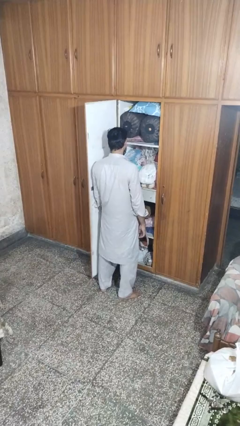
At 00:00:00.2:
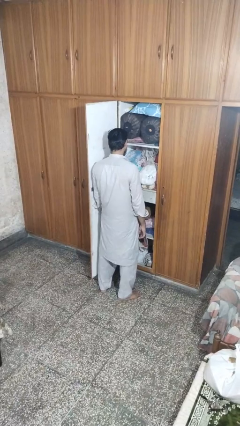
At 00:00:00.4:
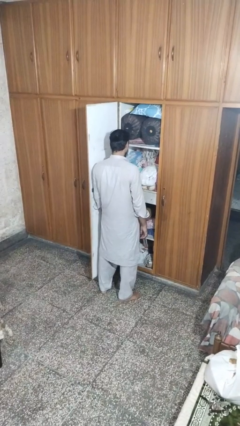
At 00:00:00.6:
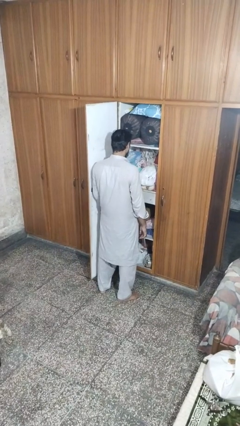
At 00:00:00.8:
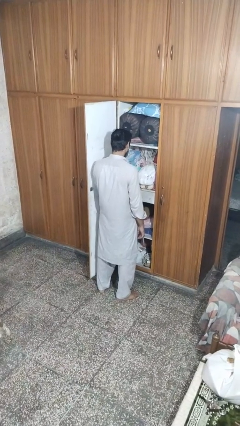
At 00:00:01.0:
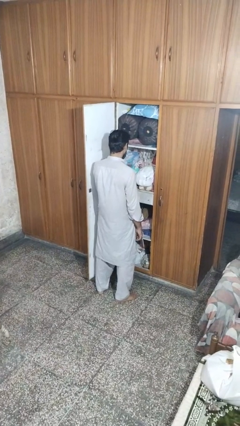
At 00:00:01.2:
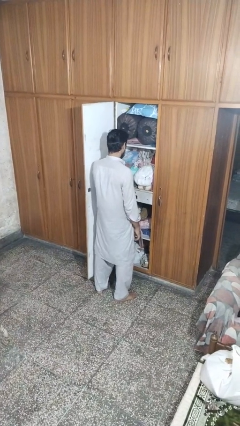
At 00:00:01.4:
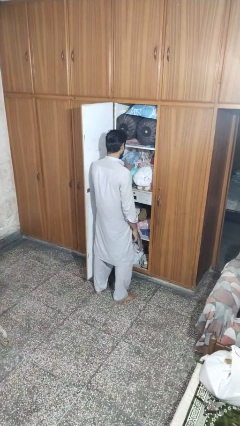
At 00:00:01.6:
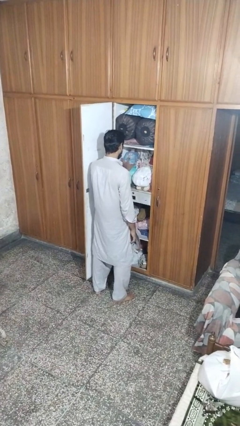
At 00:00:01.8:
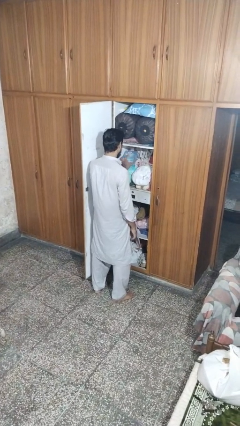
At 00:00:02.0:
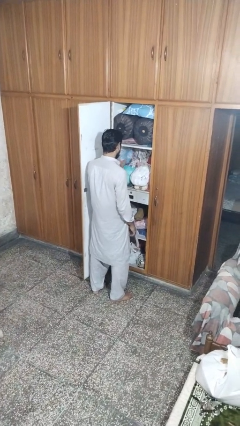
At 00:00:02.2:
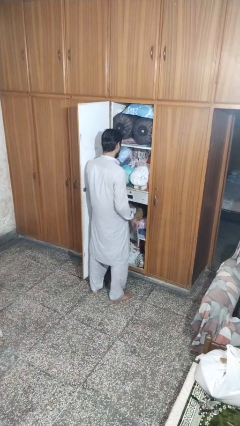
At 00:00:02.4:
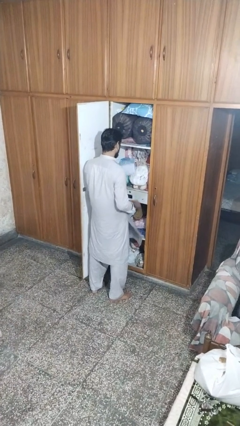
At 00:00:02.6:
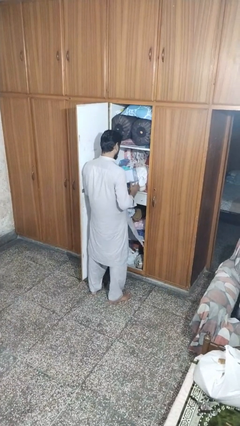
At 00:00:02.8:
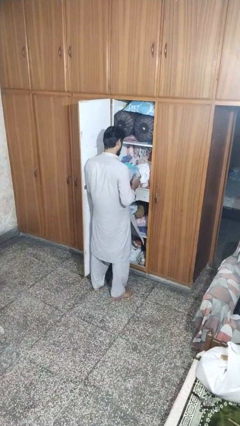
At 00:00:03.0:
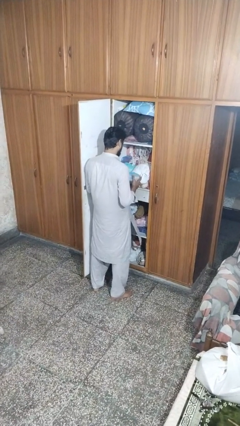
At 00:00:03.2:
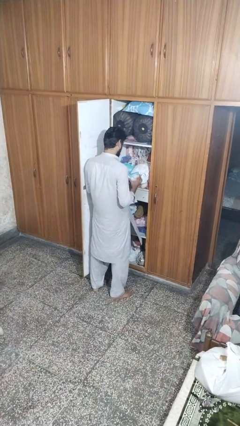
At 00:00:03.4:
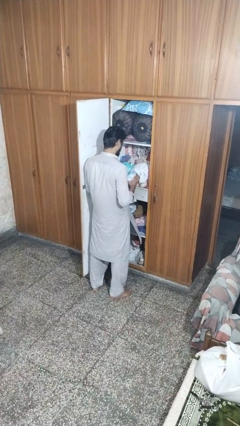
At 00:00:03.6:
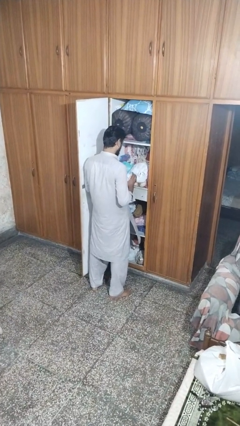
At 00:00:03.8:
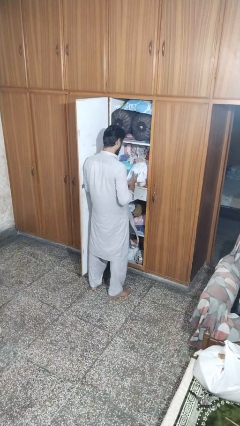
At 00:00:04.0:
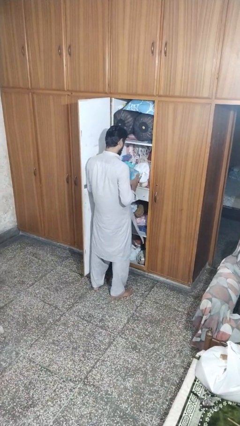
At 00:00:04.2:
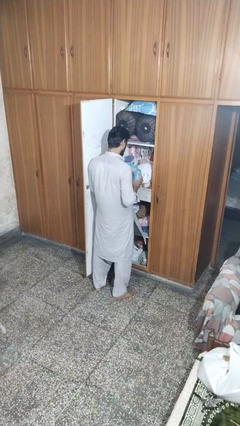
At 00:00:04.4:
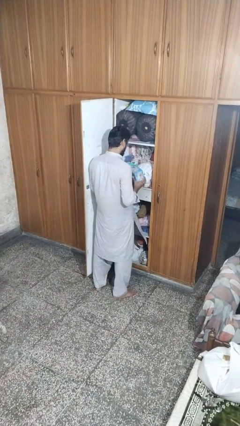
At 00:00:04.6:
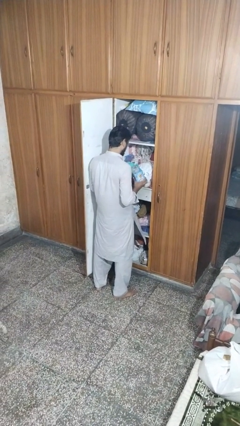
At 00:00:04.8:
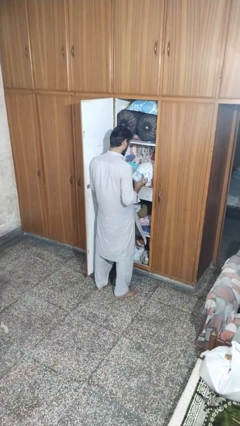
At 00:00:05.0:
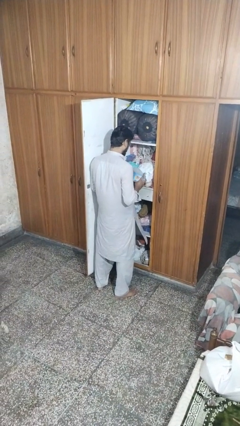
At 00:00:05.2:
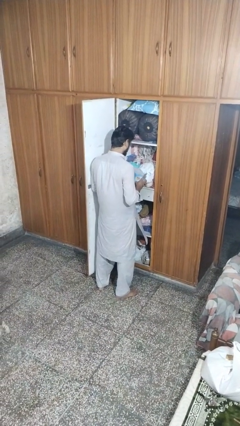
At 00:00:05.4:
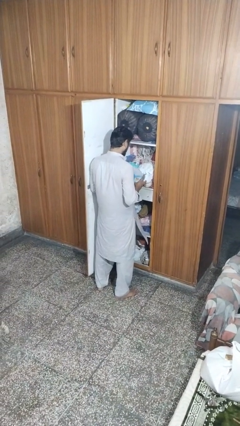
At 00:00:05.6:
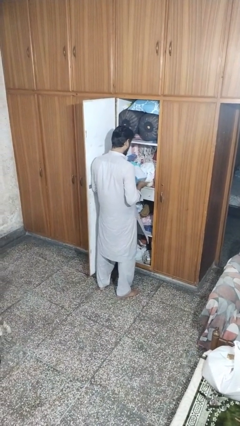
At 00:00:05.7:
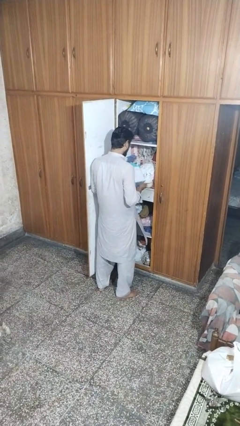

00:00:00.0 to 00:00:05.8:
person picks up object from cabinet

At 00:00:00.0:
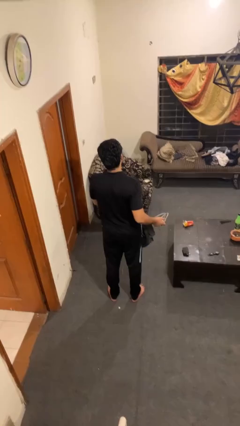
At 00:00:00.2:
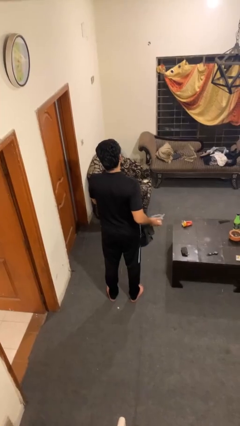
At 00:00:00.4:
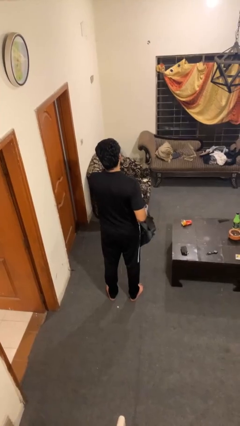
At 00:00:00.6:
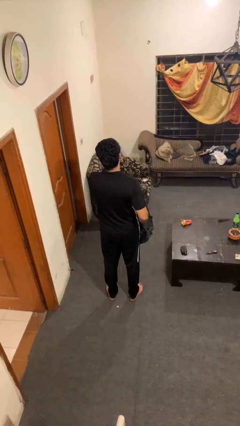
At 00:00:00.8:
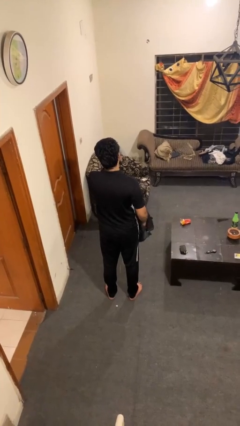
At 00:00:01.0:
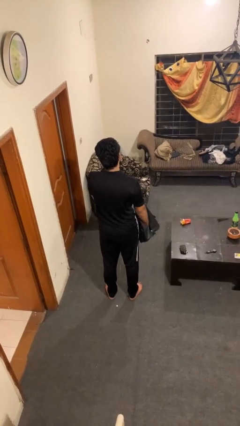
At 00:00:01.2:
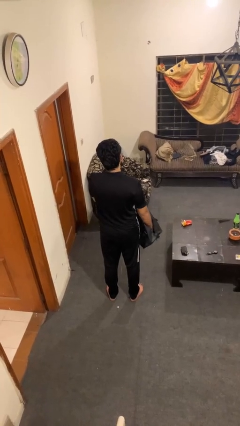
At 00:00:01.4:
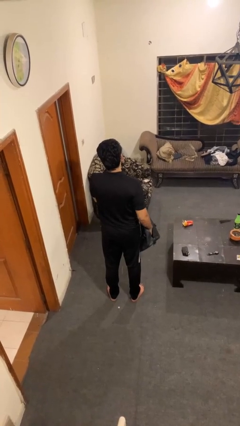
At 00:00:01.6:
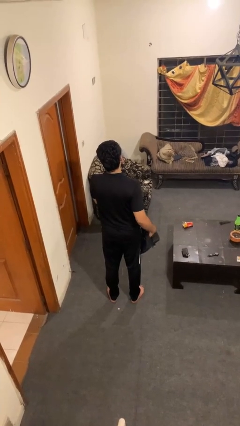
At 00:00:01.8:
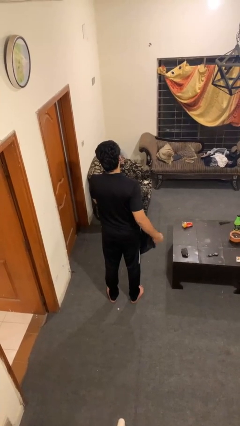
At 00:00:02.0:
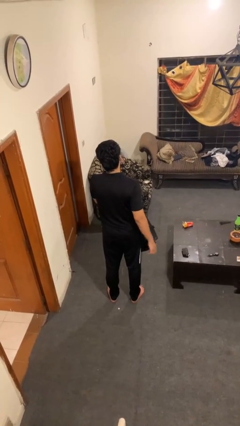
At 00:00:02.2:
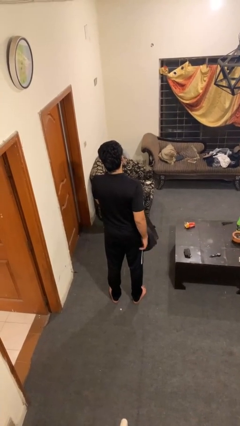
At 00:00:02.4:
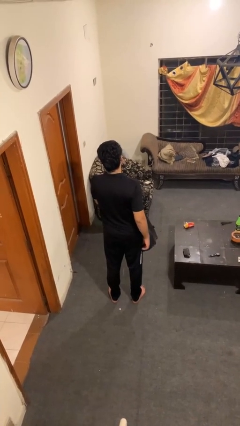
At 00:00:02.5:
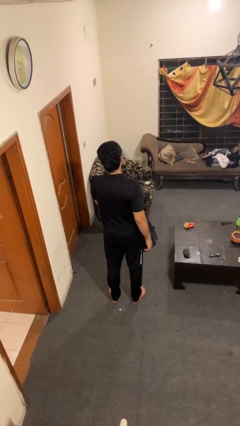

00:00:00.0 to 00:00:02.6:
person puts object into bag

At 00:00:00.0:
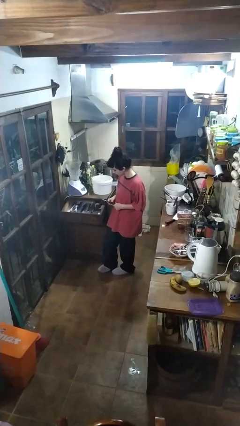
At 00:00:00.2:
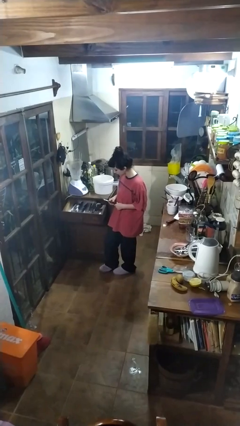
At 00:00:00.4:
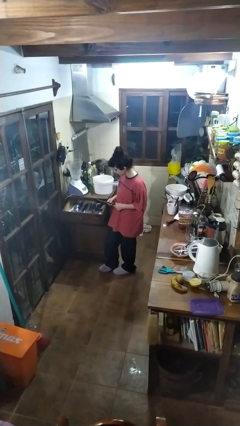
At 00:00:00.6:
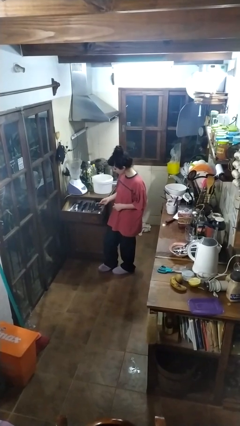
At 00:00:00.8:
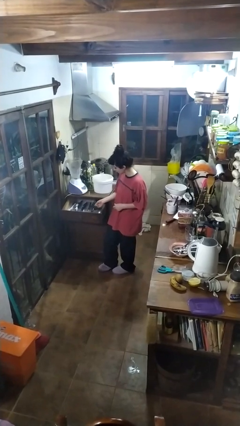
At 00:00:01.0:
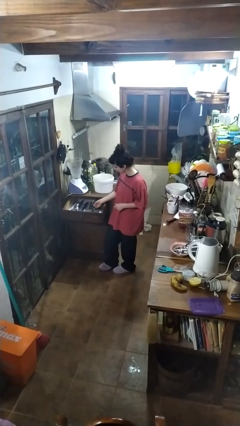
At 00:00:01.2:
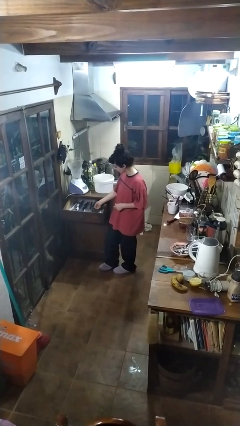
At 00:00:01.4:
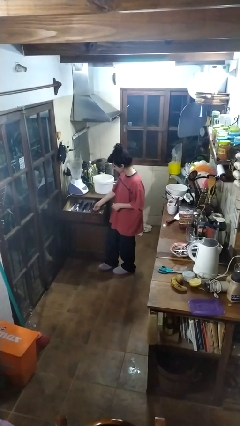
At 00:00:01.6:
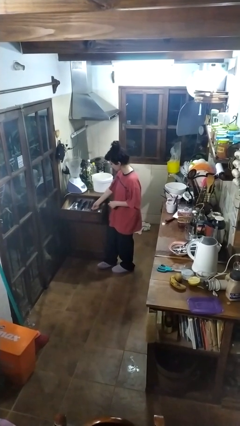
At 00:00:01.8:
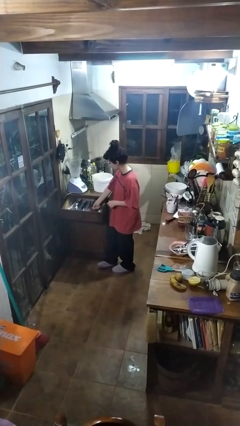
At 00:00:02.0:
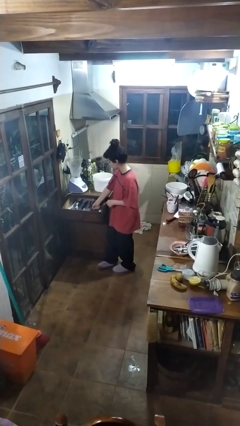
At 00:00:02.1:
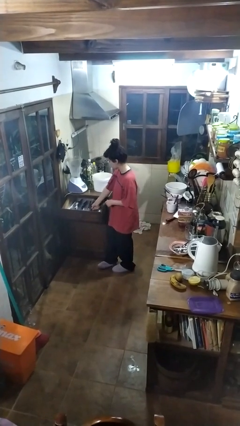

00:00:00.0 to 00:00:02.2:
person puts object into kitchen drawer

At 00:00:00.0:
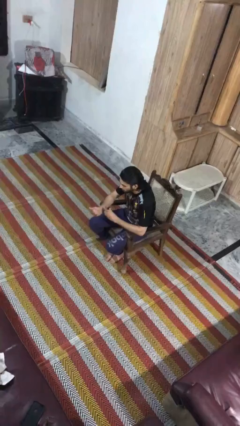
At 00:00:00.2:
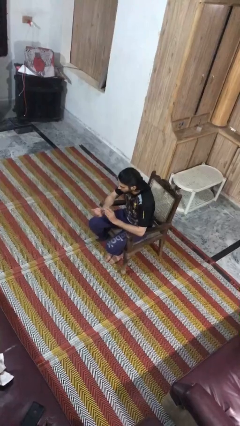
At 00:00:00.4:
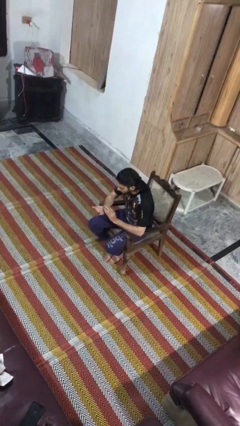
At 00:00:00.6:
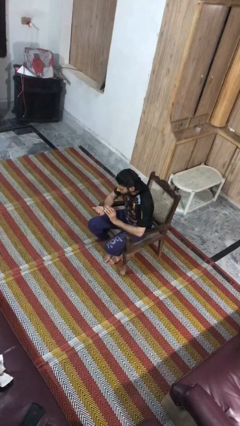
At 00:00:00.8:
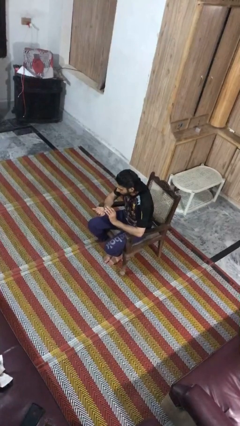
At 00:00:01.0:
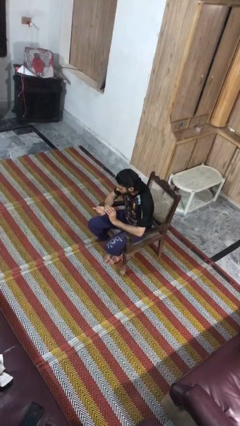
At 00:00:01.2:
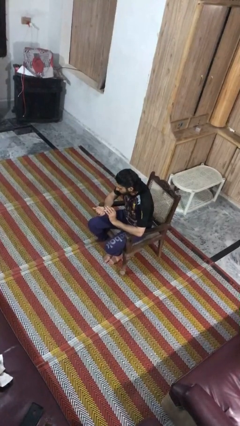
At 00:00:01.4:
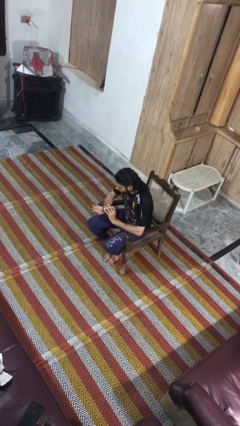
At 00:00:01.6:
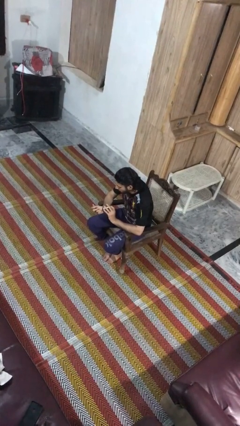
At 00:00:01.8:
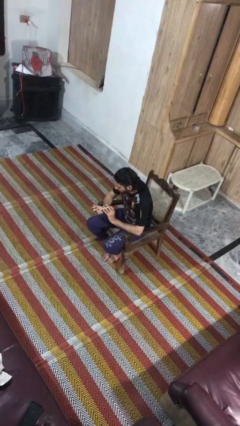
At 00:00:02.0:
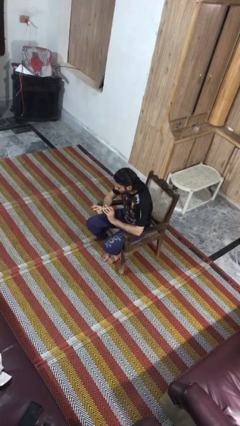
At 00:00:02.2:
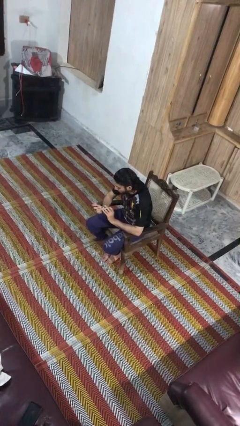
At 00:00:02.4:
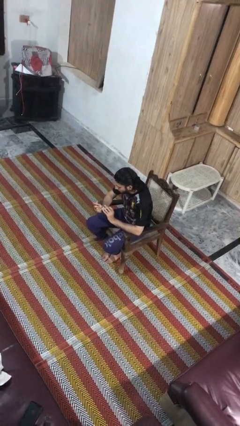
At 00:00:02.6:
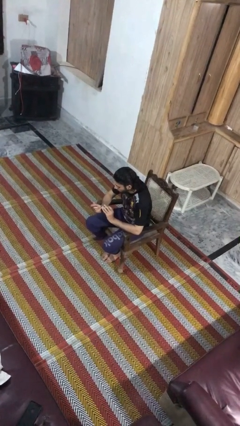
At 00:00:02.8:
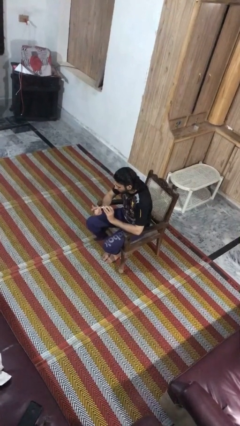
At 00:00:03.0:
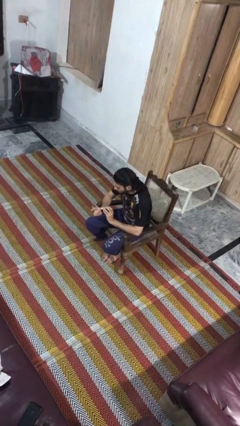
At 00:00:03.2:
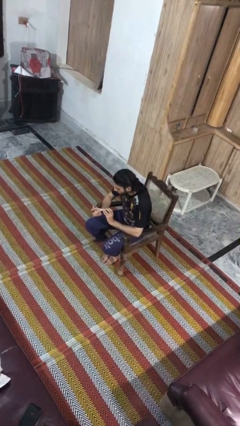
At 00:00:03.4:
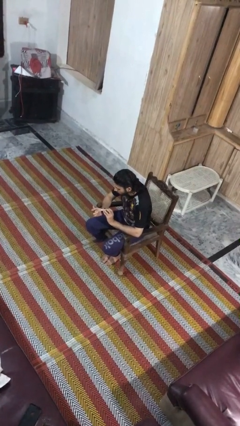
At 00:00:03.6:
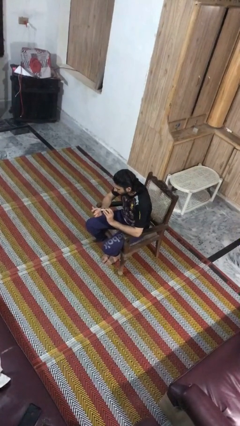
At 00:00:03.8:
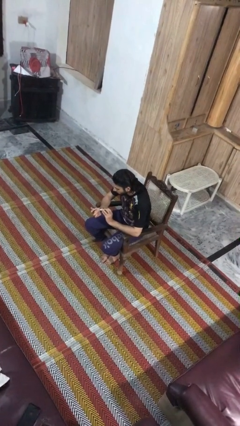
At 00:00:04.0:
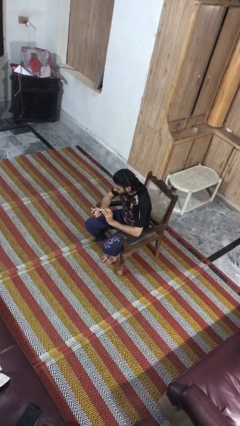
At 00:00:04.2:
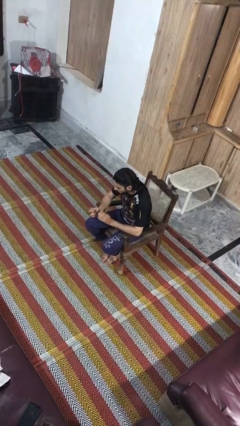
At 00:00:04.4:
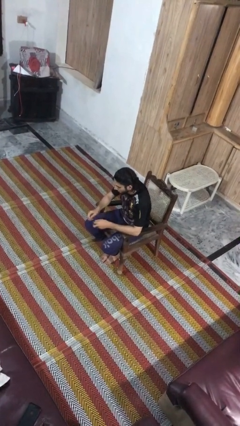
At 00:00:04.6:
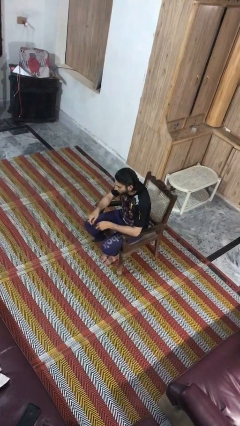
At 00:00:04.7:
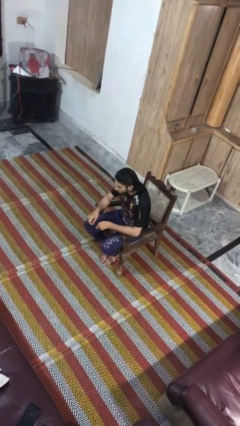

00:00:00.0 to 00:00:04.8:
person clips fingernails

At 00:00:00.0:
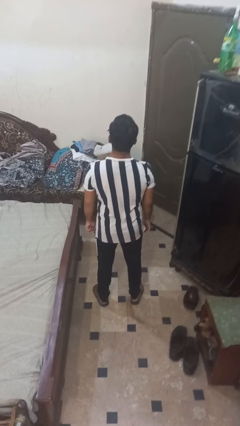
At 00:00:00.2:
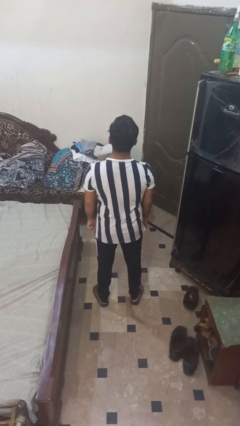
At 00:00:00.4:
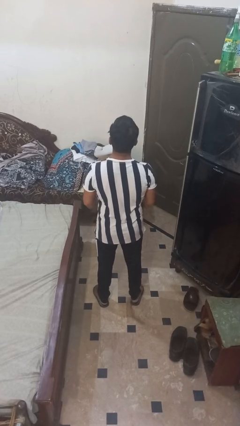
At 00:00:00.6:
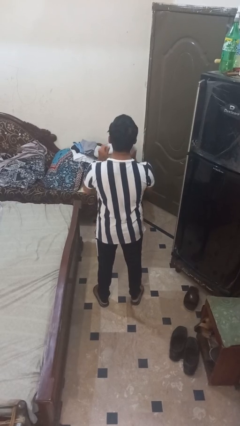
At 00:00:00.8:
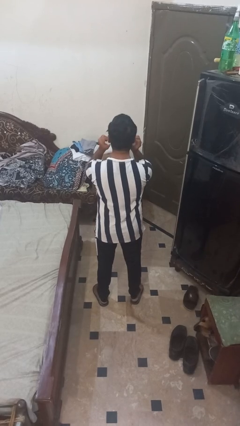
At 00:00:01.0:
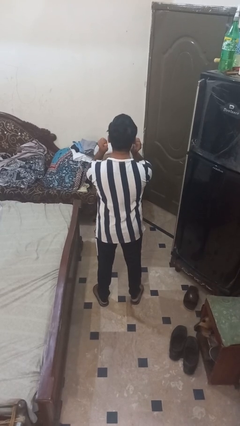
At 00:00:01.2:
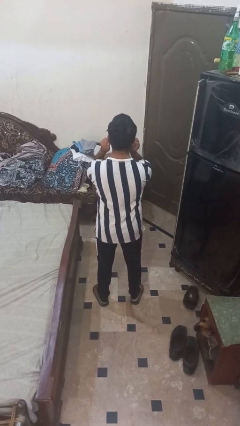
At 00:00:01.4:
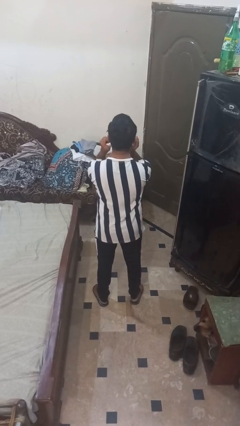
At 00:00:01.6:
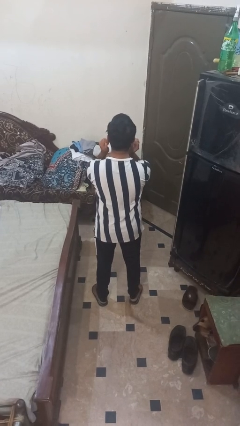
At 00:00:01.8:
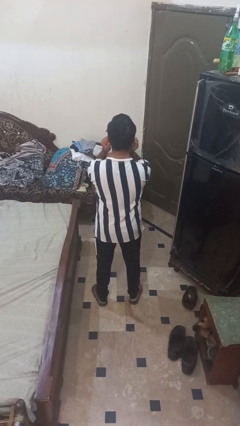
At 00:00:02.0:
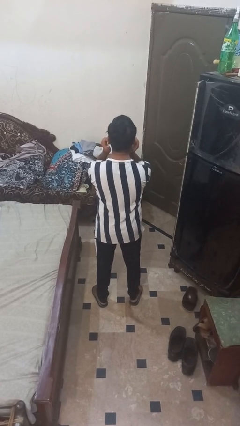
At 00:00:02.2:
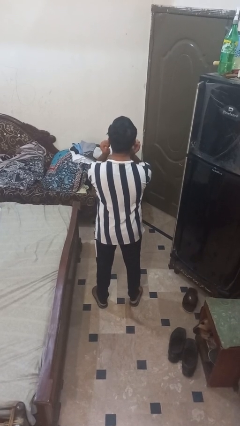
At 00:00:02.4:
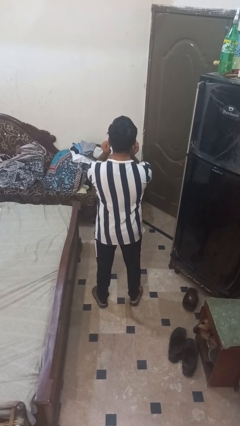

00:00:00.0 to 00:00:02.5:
person touches earlobe
